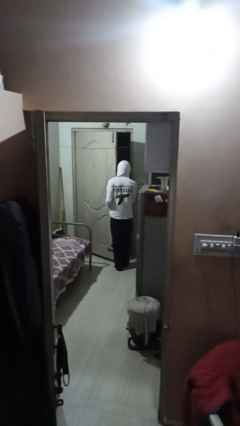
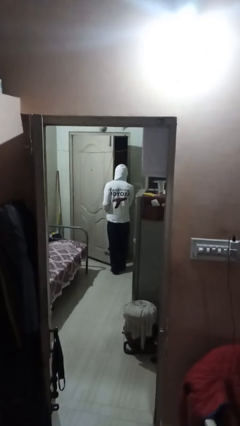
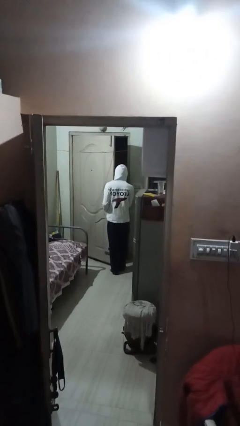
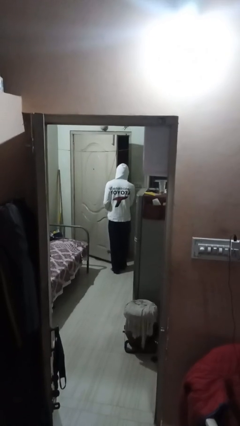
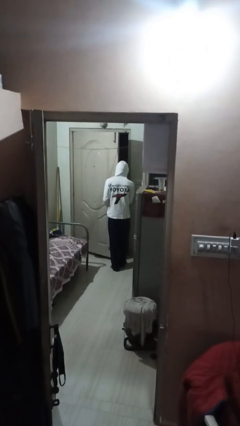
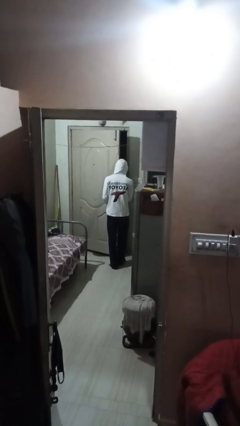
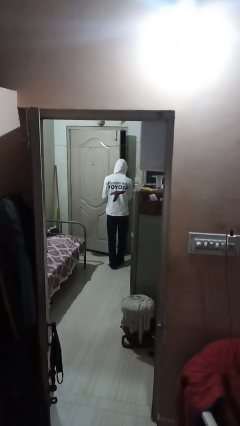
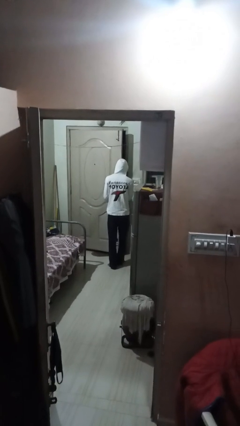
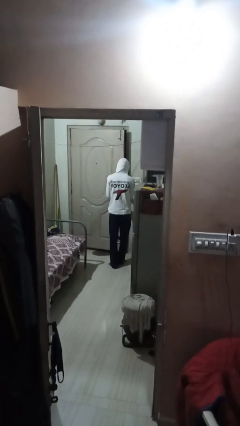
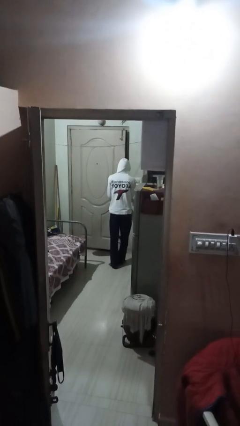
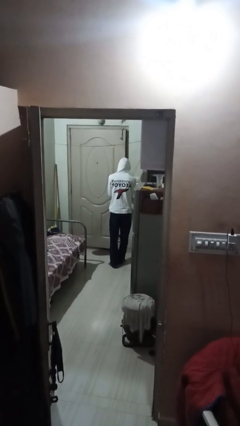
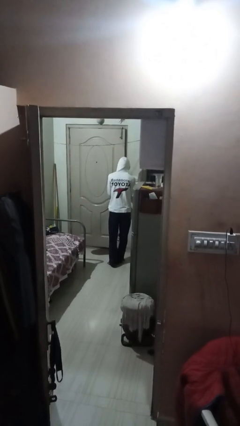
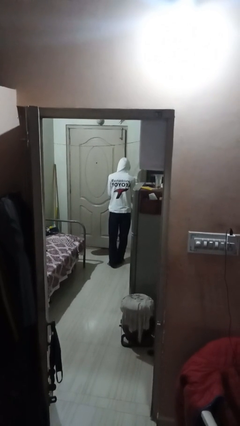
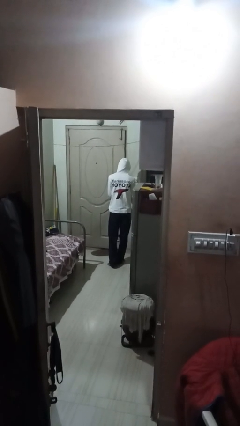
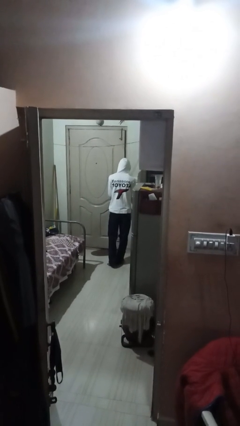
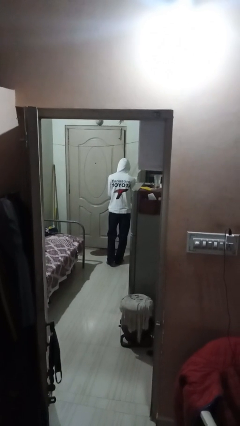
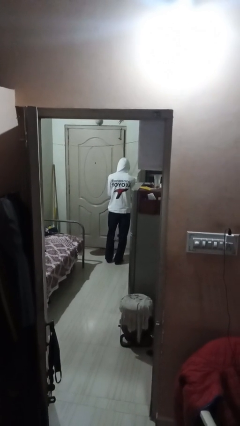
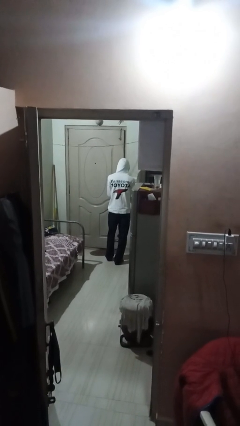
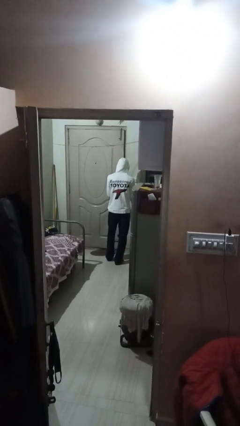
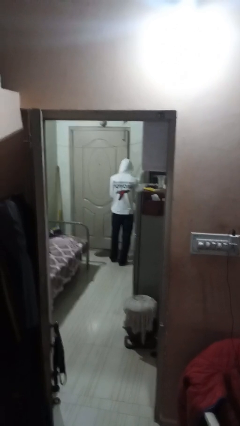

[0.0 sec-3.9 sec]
person closes facility door

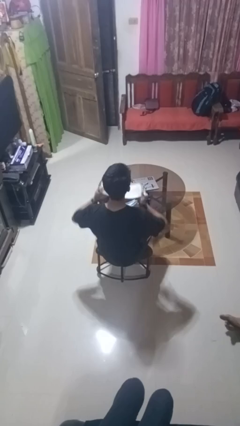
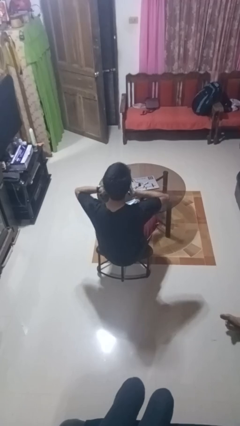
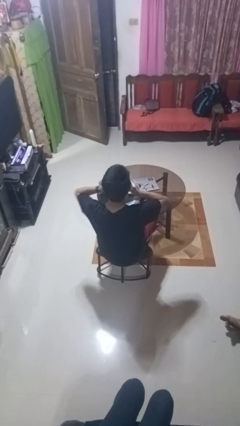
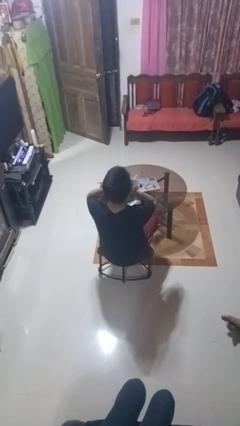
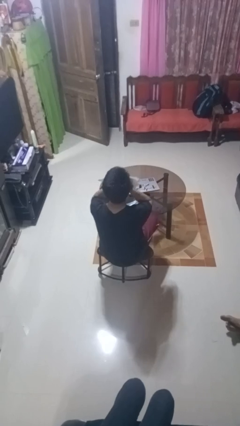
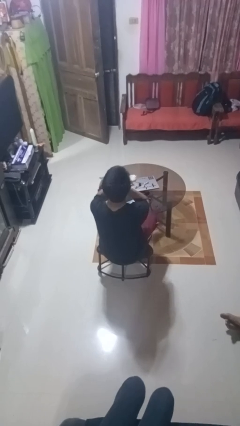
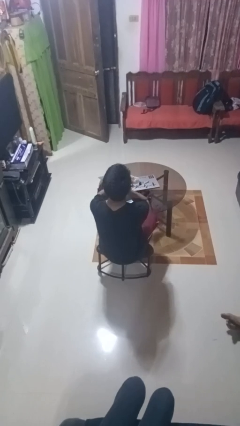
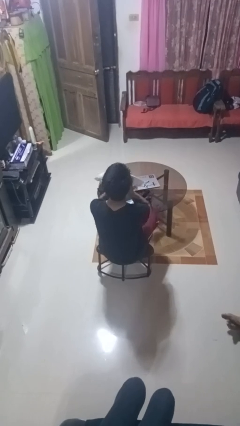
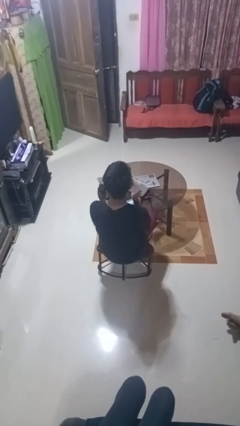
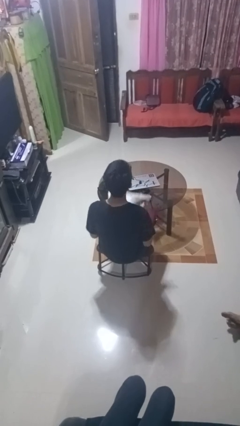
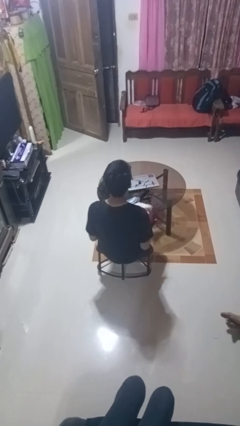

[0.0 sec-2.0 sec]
person wipes mouth with napkin

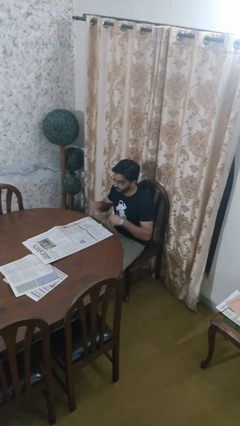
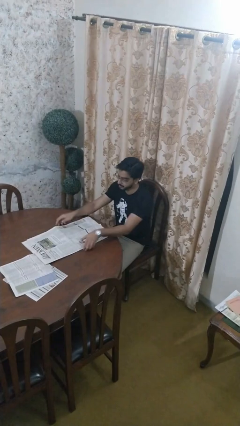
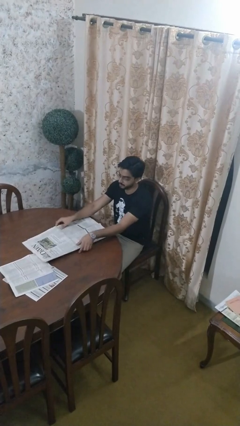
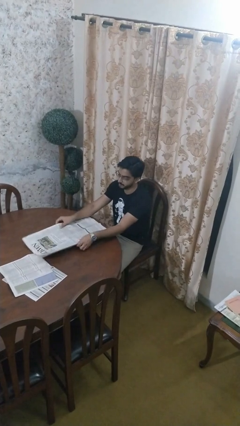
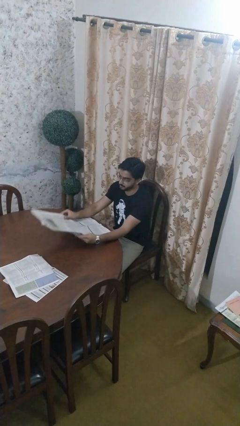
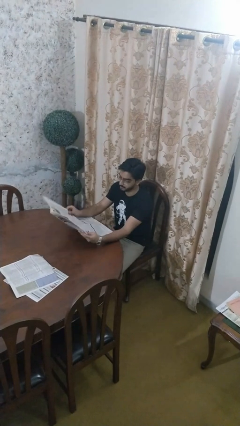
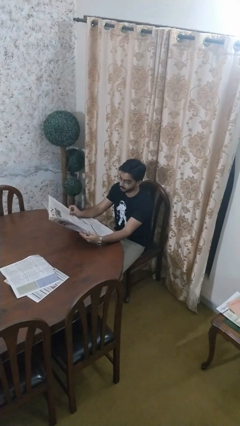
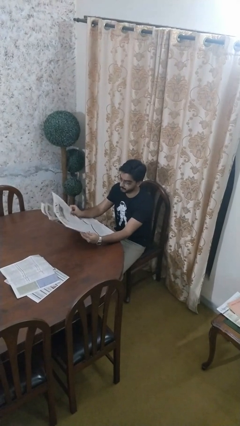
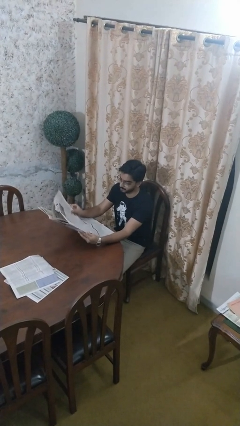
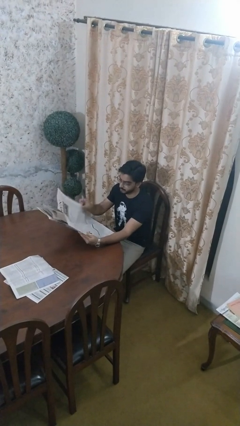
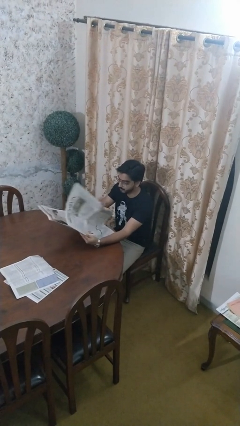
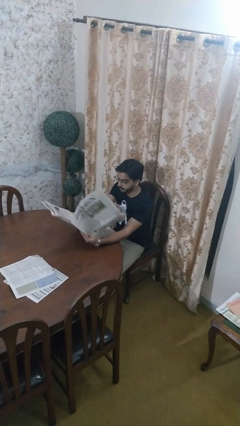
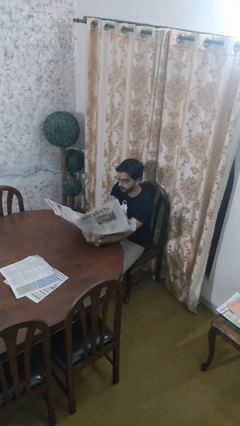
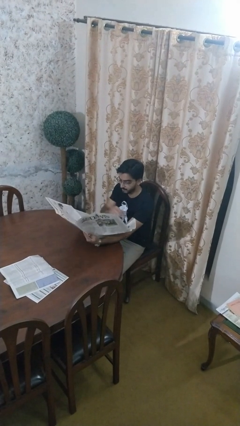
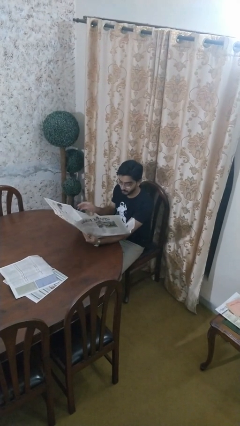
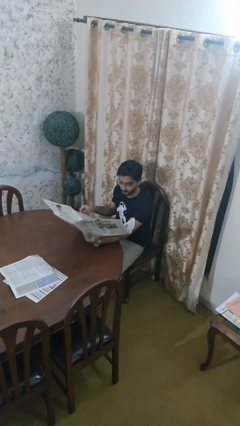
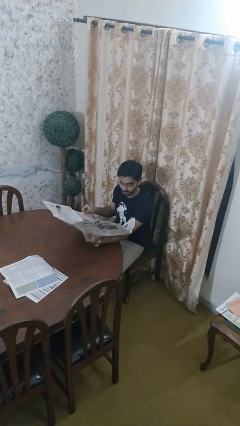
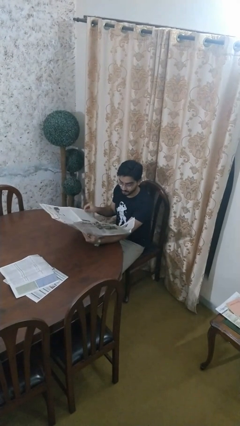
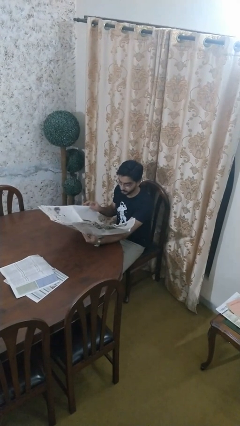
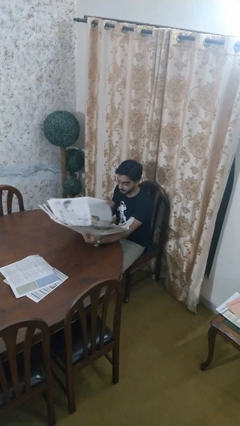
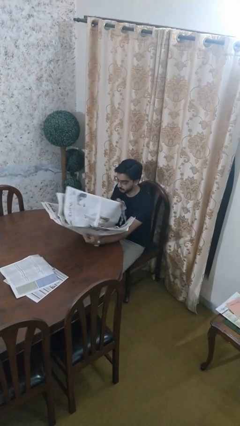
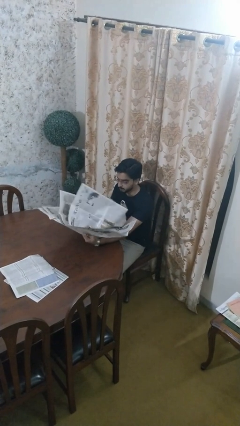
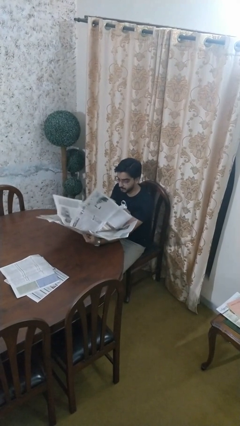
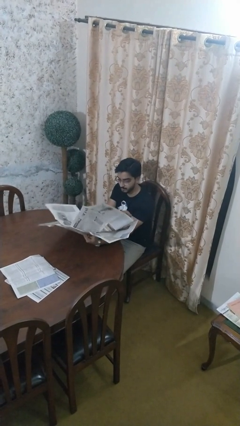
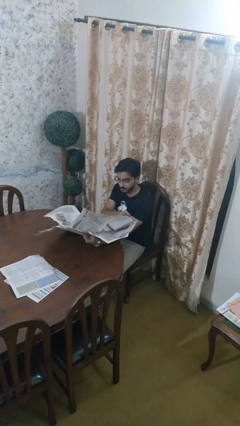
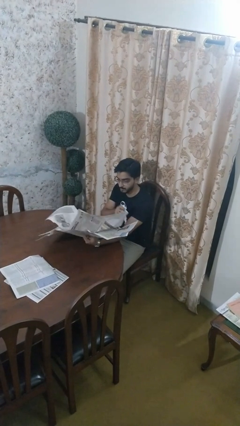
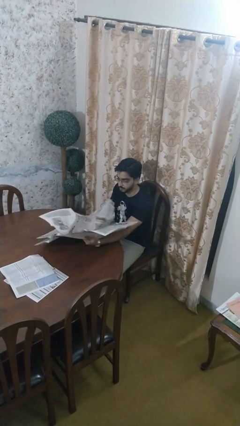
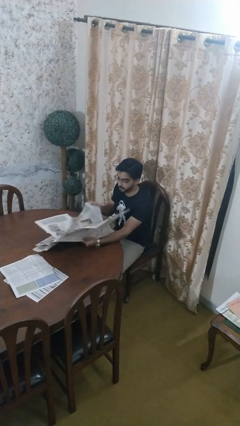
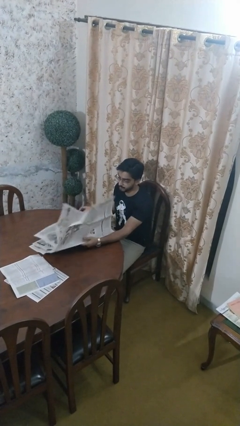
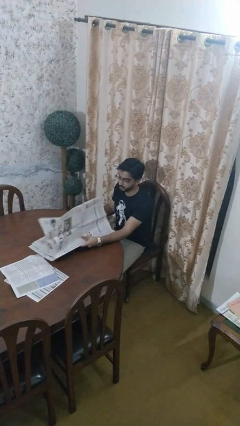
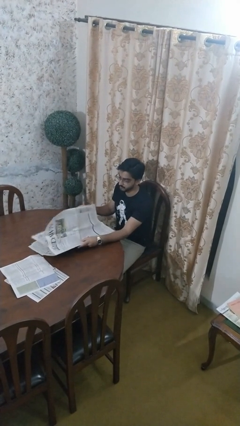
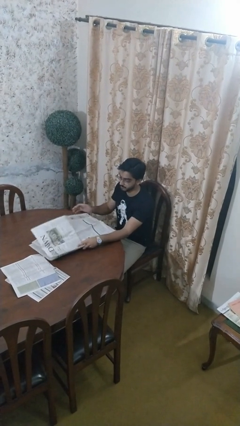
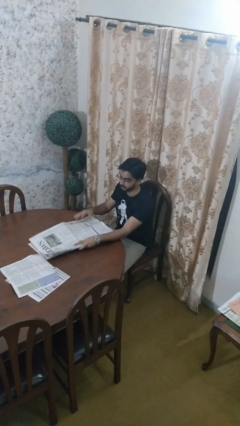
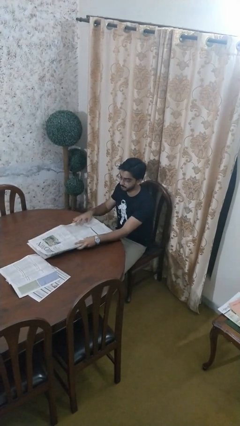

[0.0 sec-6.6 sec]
person reads newspaper

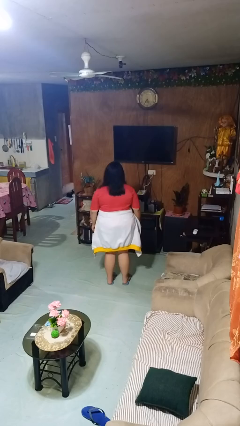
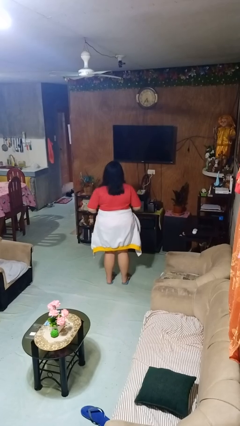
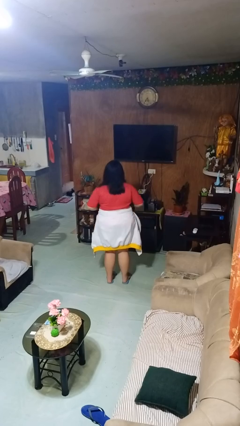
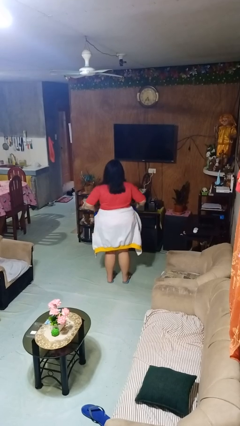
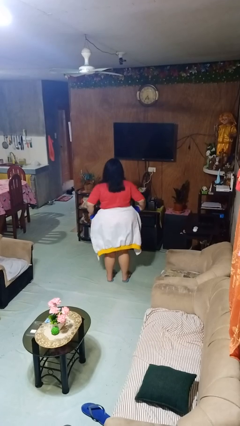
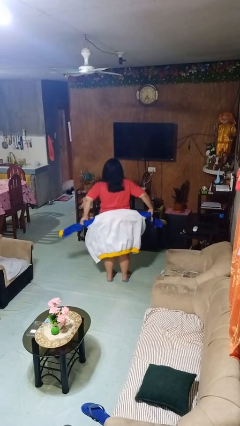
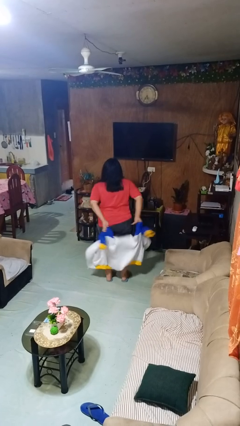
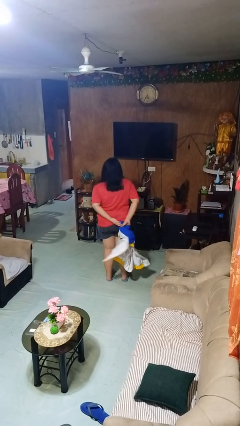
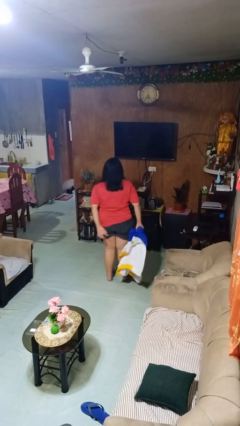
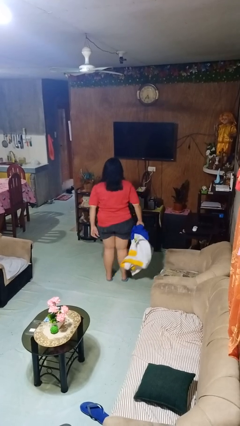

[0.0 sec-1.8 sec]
person unties jacket around waist

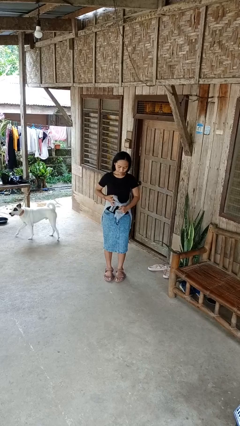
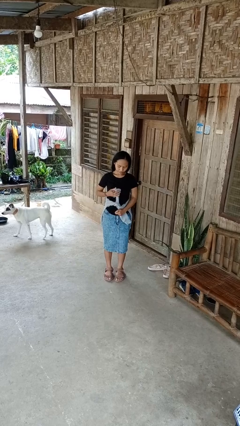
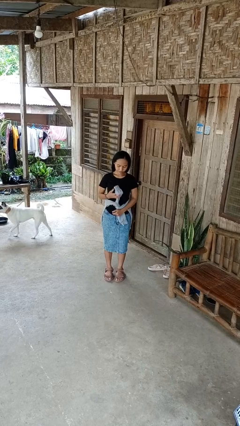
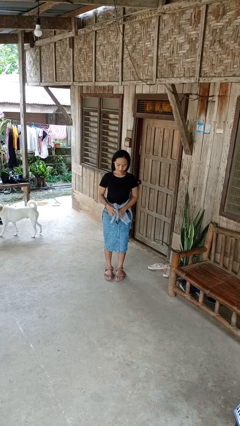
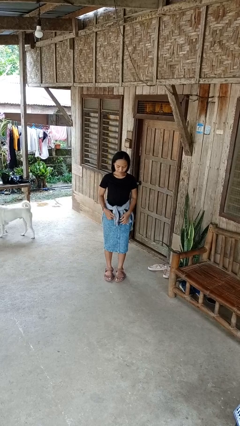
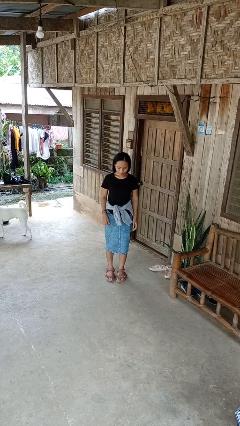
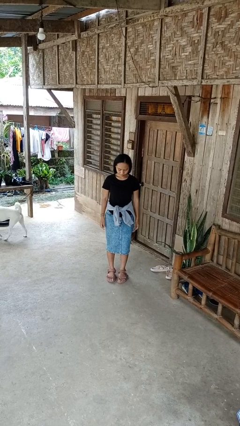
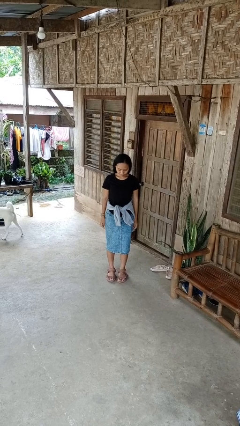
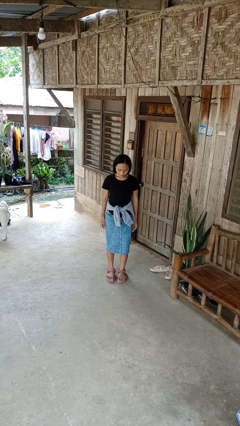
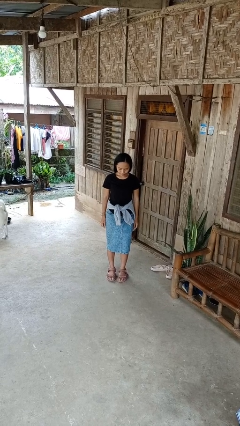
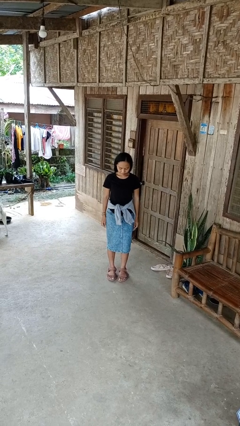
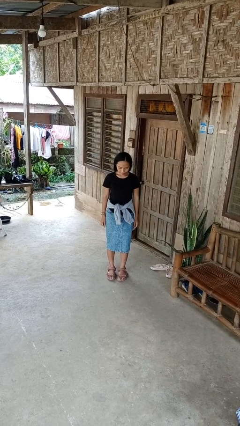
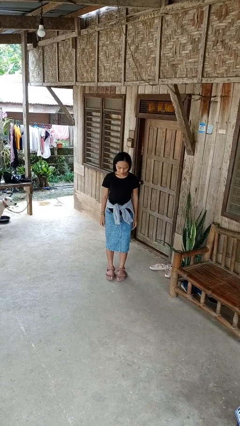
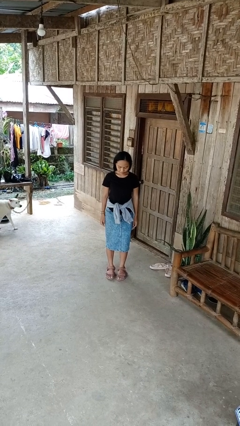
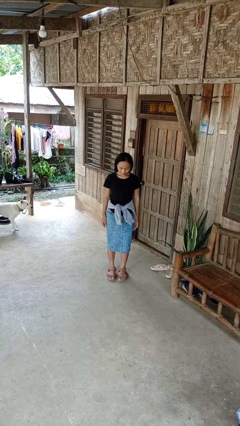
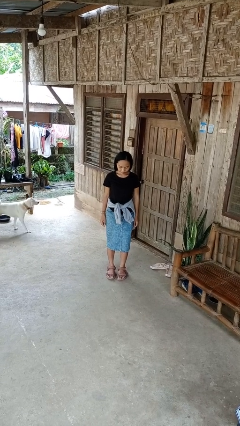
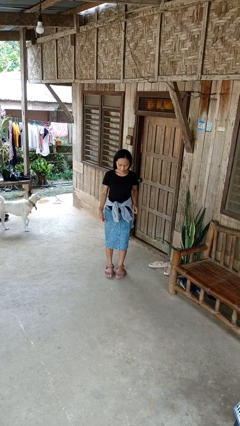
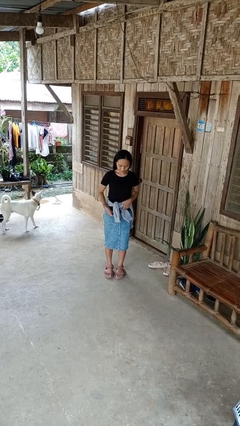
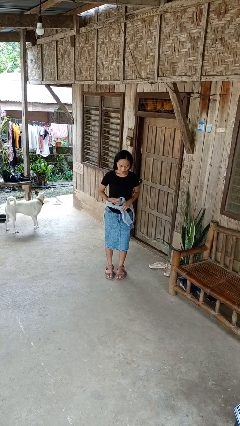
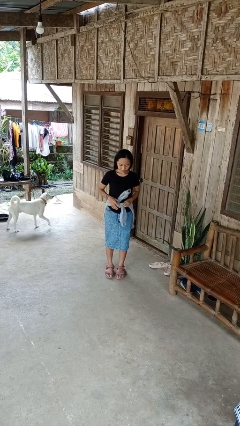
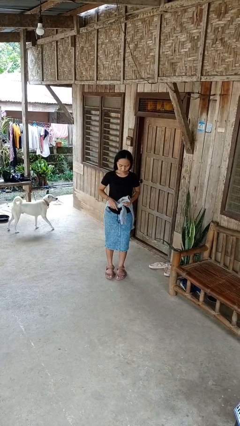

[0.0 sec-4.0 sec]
person ties jacket around waist
